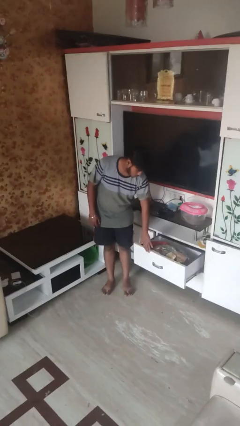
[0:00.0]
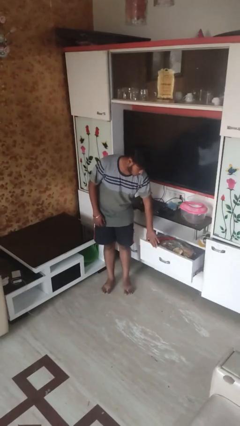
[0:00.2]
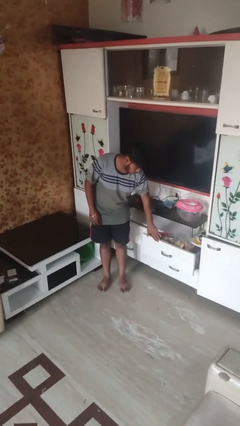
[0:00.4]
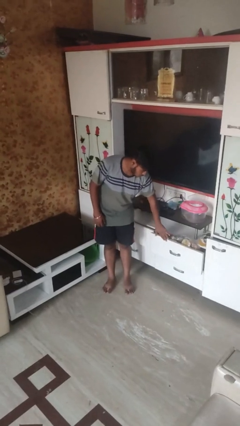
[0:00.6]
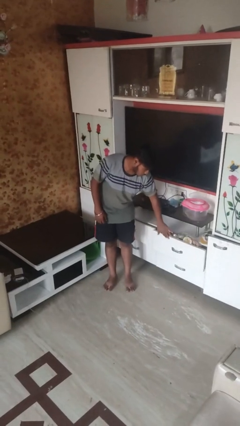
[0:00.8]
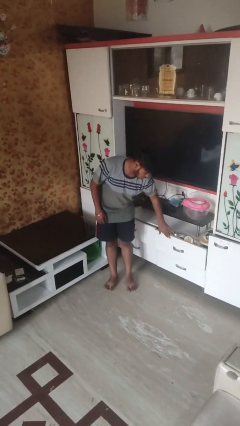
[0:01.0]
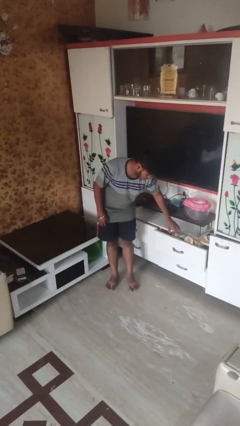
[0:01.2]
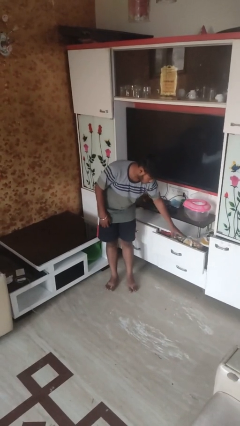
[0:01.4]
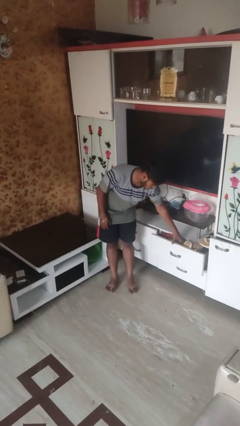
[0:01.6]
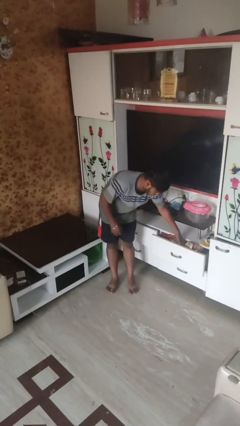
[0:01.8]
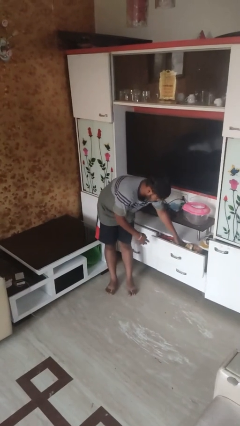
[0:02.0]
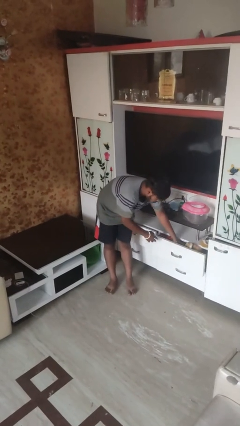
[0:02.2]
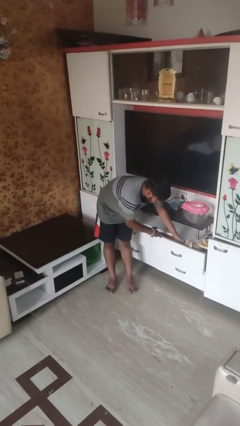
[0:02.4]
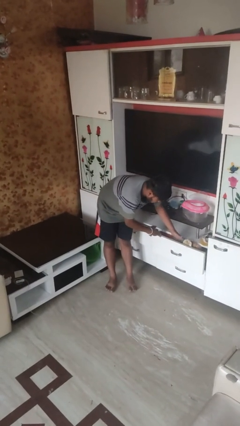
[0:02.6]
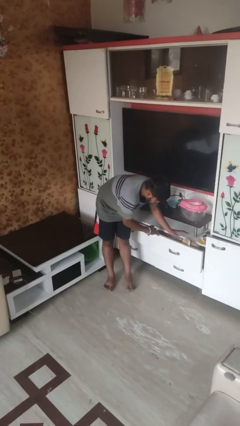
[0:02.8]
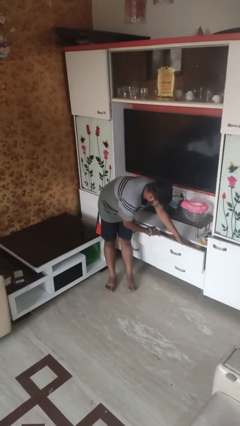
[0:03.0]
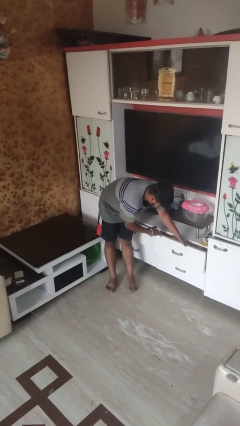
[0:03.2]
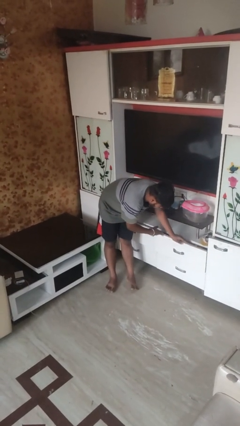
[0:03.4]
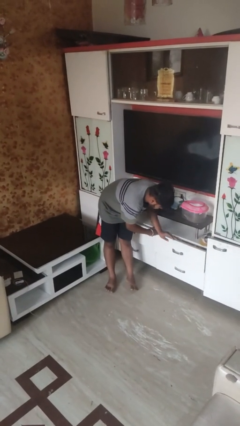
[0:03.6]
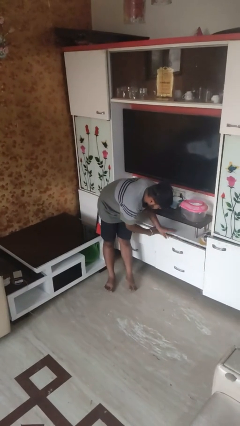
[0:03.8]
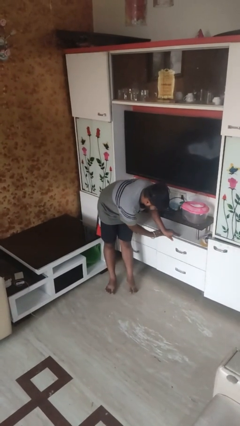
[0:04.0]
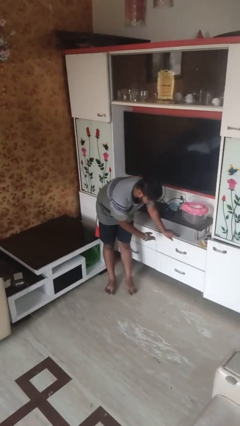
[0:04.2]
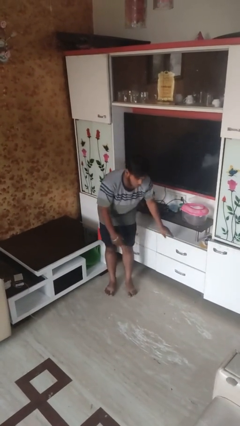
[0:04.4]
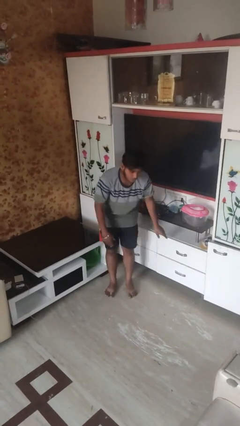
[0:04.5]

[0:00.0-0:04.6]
person closes dresser drawer

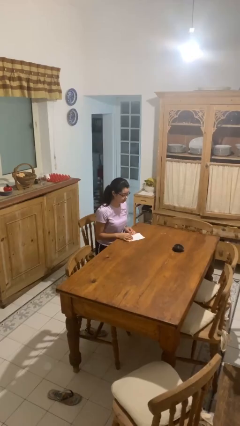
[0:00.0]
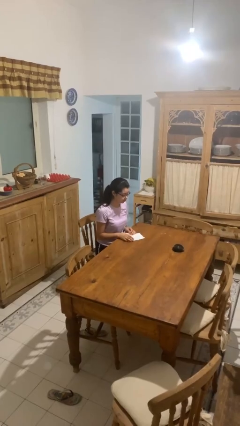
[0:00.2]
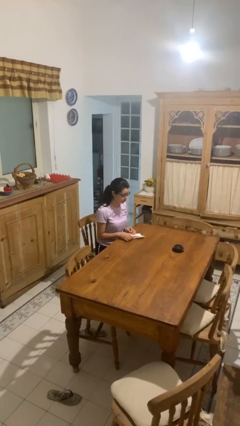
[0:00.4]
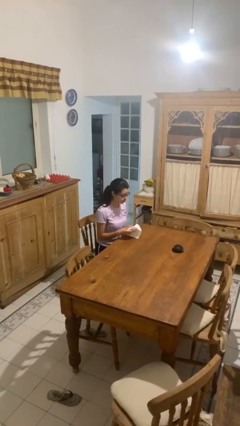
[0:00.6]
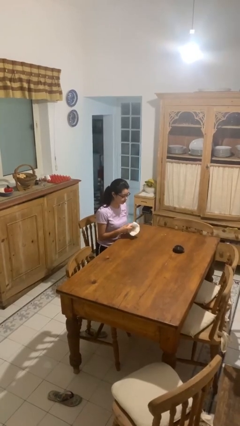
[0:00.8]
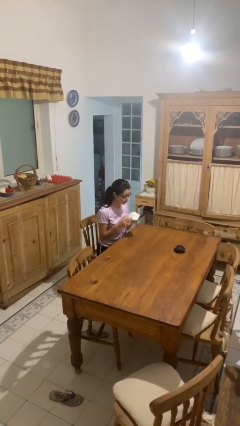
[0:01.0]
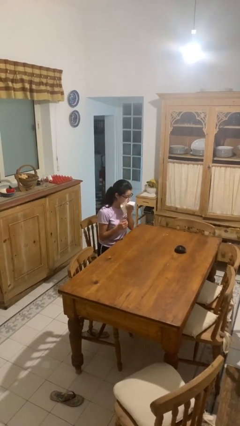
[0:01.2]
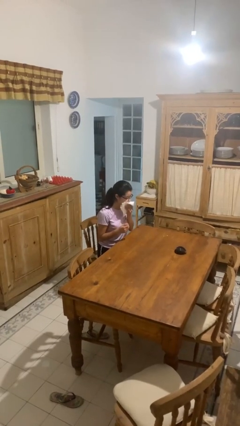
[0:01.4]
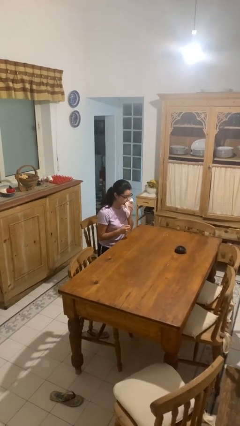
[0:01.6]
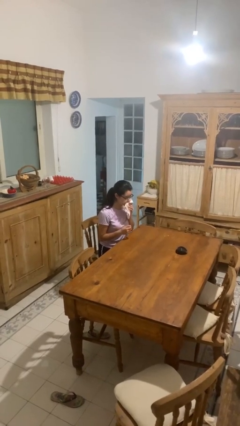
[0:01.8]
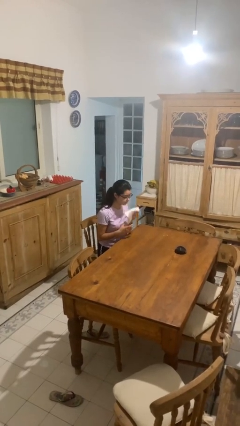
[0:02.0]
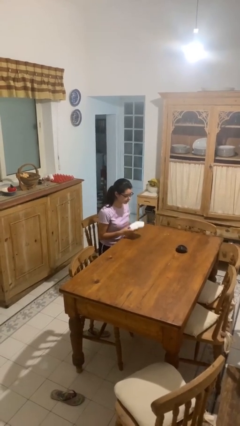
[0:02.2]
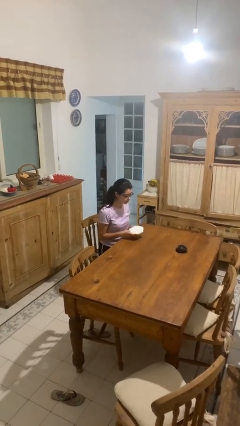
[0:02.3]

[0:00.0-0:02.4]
person wipes mouth with napkin

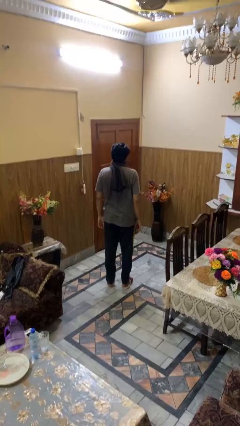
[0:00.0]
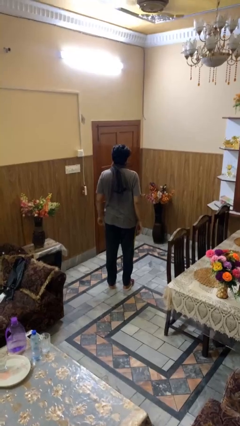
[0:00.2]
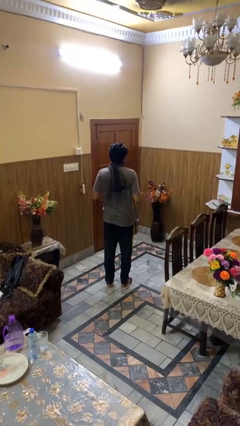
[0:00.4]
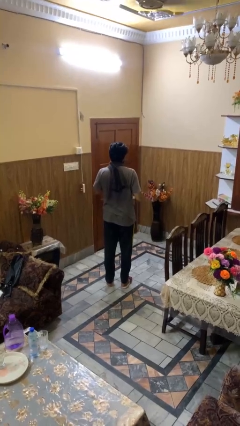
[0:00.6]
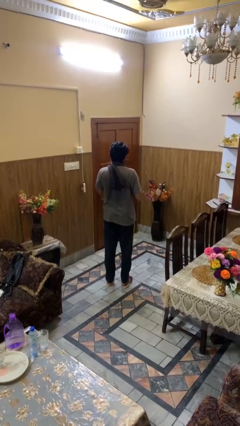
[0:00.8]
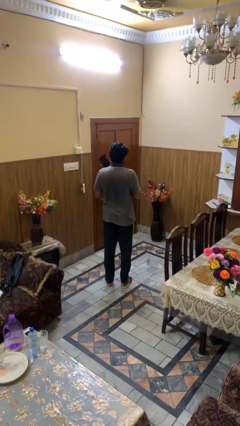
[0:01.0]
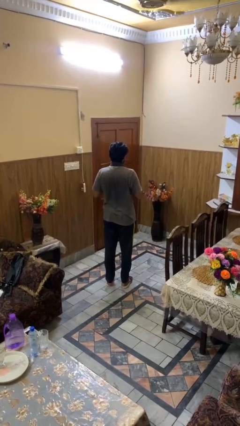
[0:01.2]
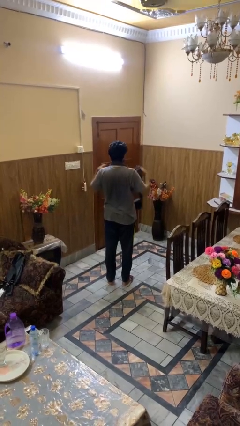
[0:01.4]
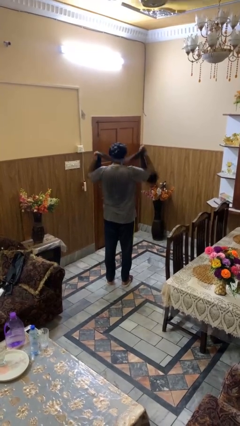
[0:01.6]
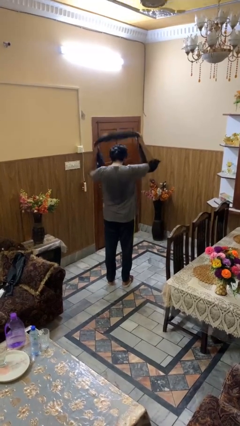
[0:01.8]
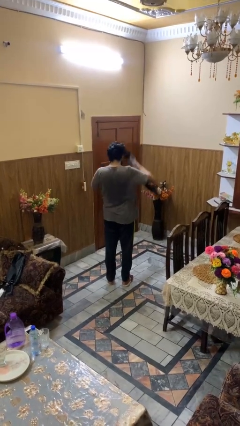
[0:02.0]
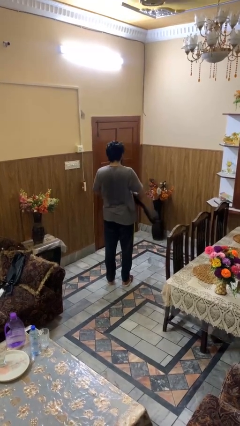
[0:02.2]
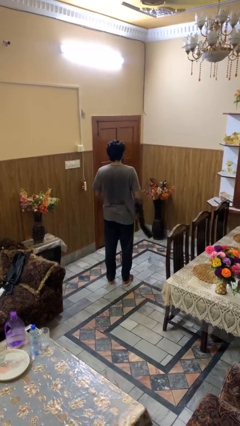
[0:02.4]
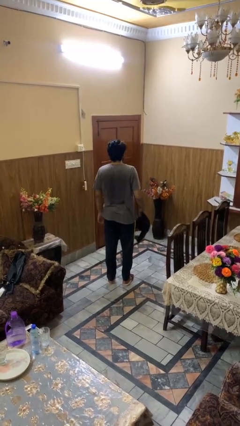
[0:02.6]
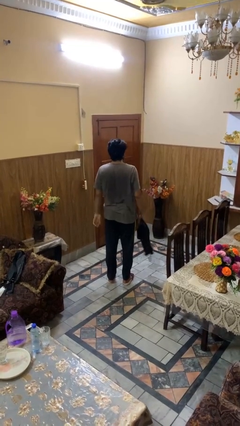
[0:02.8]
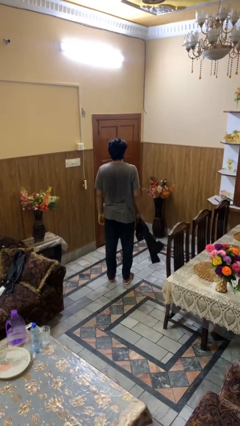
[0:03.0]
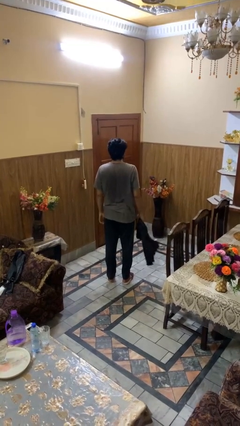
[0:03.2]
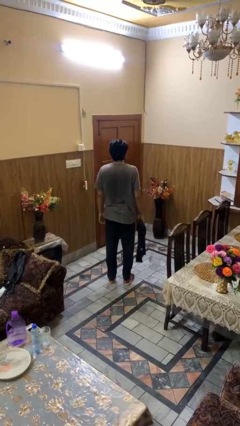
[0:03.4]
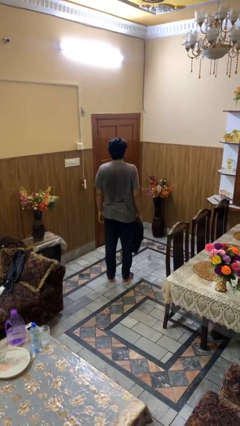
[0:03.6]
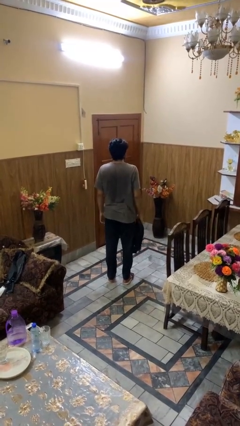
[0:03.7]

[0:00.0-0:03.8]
person takes off scarf

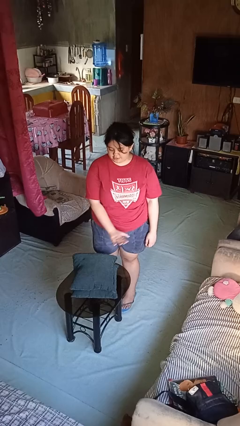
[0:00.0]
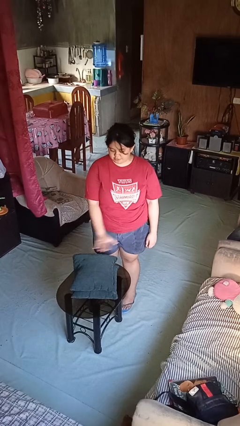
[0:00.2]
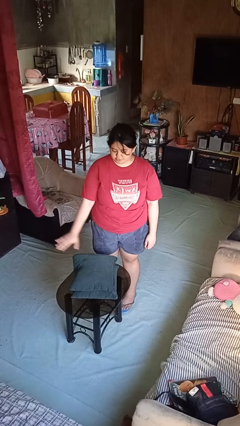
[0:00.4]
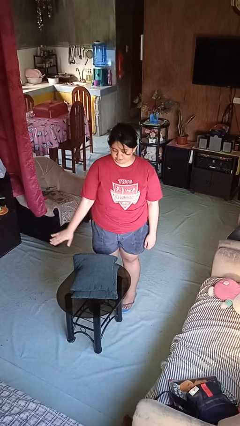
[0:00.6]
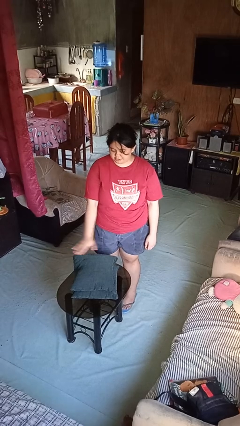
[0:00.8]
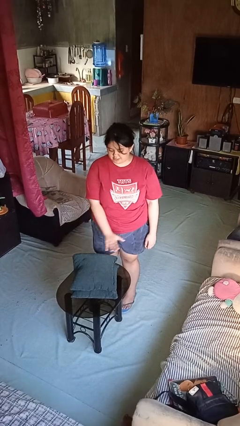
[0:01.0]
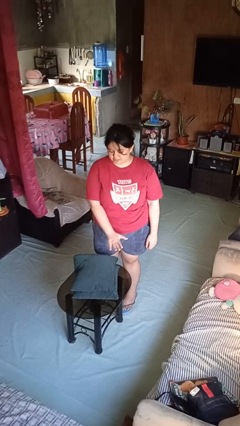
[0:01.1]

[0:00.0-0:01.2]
person waves hand over object

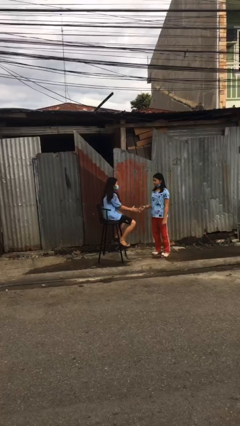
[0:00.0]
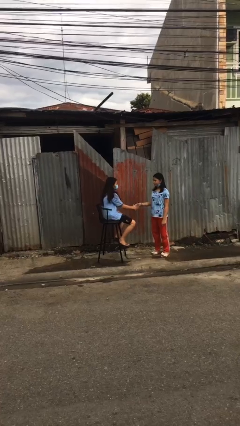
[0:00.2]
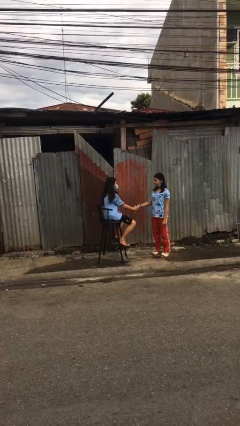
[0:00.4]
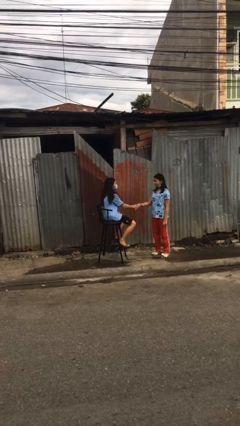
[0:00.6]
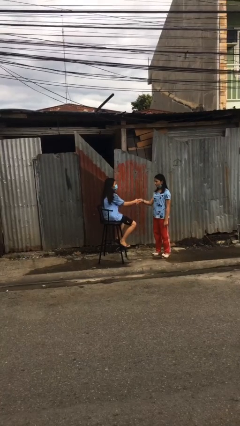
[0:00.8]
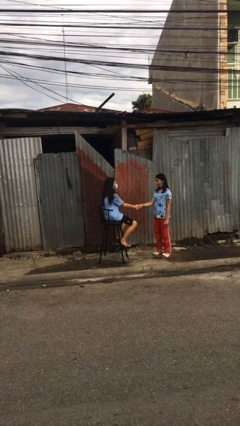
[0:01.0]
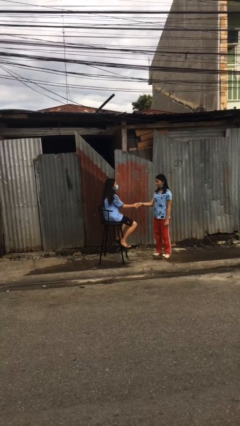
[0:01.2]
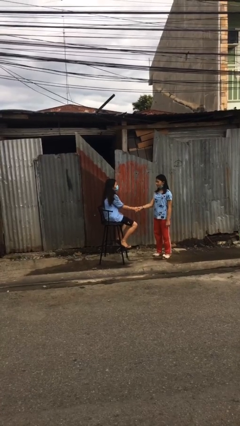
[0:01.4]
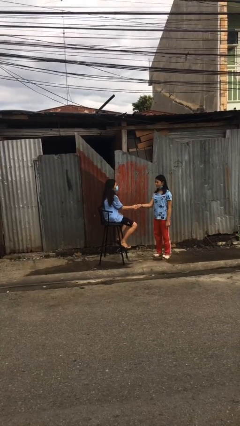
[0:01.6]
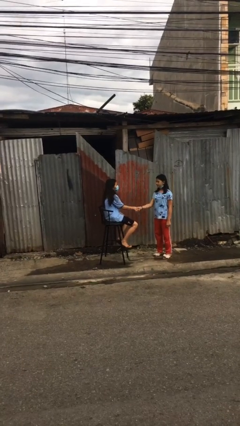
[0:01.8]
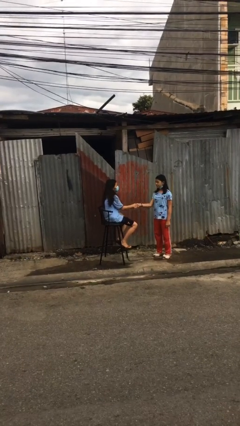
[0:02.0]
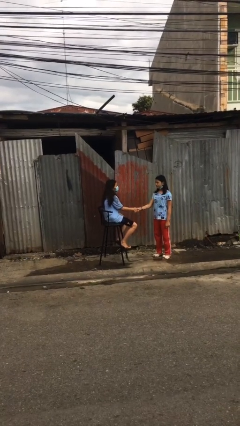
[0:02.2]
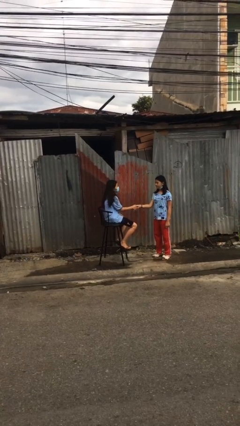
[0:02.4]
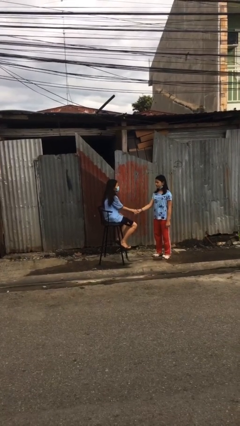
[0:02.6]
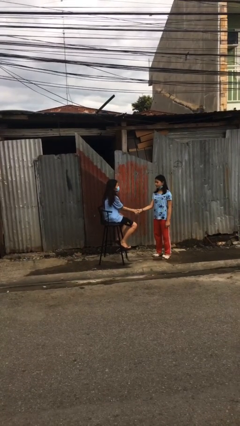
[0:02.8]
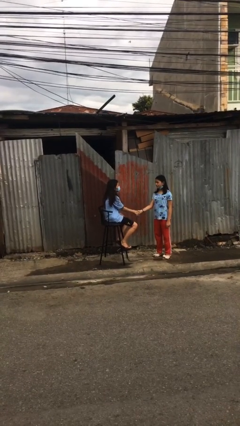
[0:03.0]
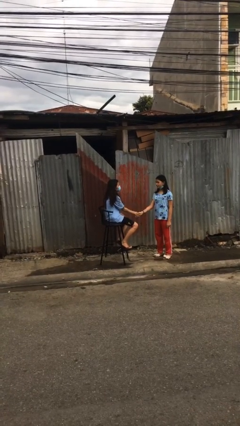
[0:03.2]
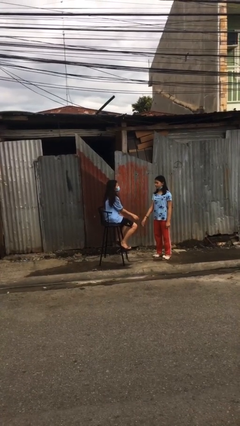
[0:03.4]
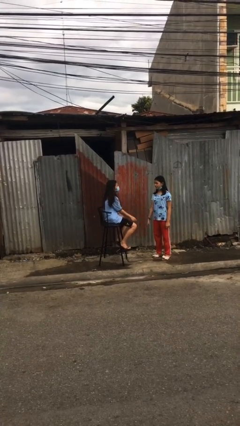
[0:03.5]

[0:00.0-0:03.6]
person shakes hand

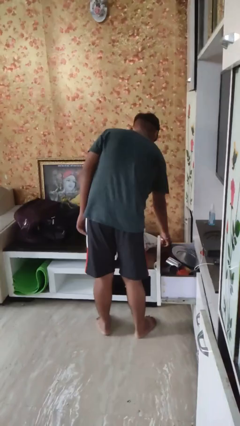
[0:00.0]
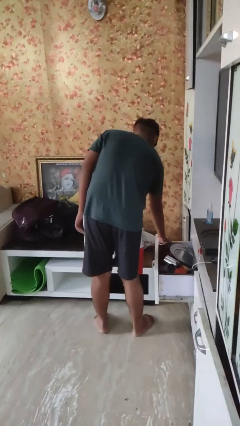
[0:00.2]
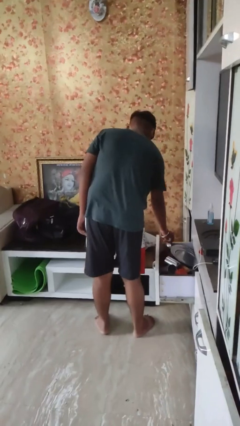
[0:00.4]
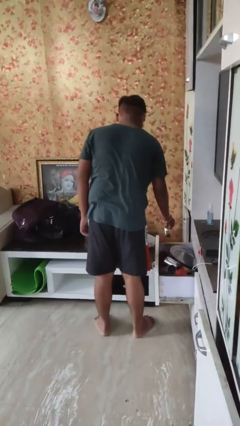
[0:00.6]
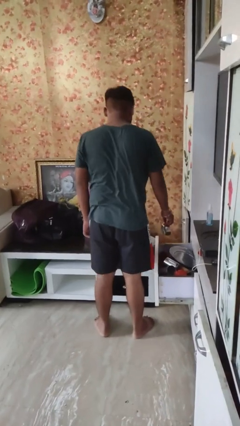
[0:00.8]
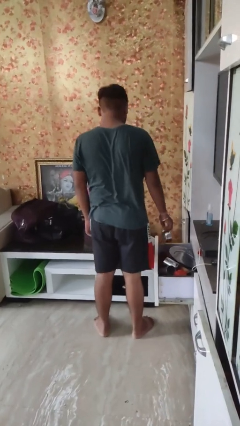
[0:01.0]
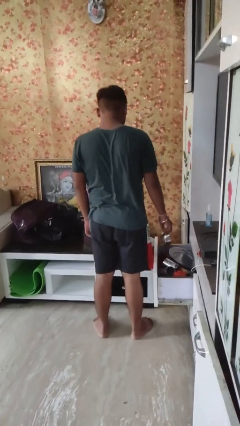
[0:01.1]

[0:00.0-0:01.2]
person takes object from kitchen drawer

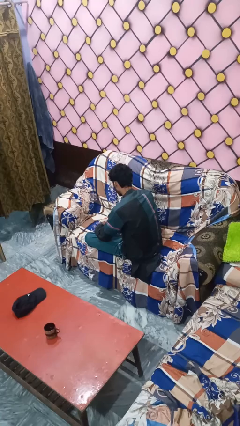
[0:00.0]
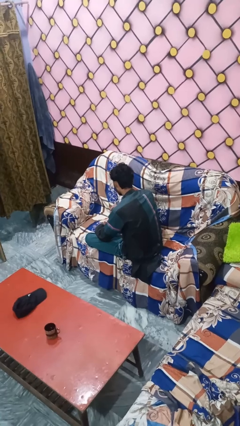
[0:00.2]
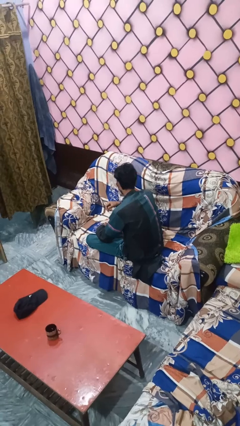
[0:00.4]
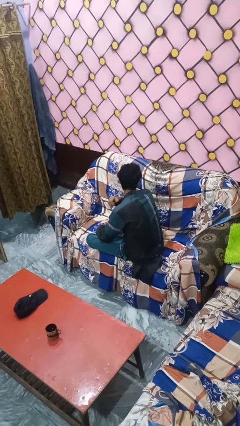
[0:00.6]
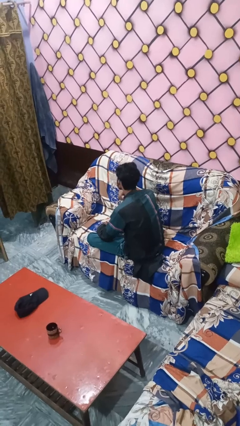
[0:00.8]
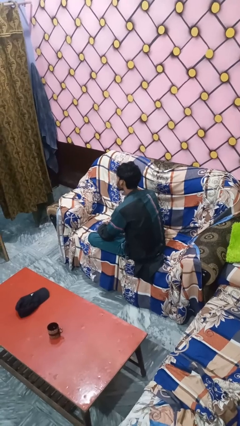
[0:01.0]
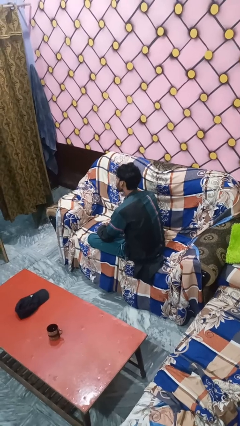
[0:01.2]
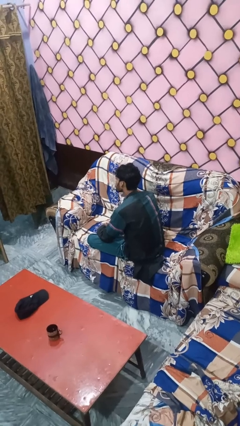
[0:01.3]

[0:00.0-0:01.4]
person gestures cut
